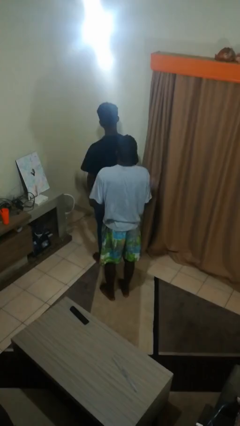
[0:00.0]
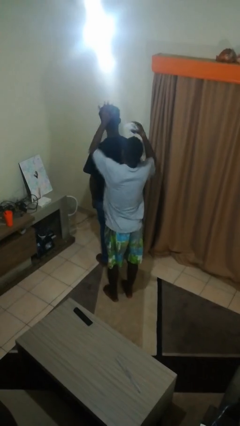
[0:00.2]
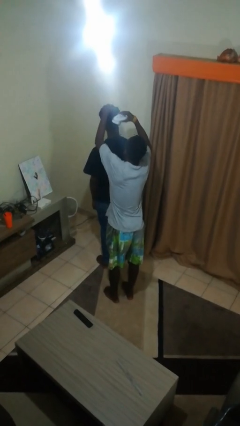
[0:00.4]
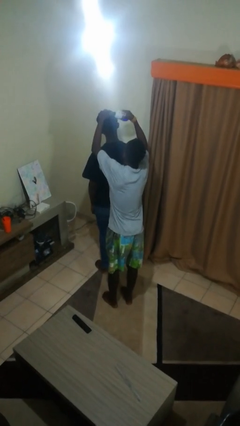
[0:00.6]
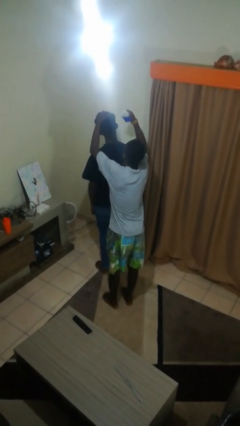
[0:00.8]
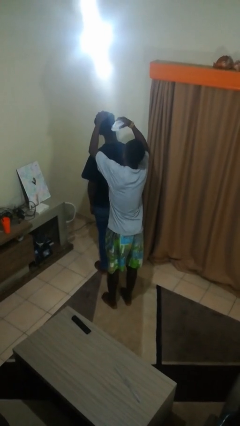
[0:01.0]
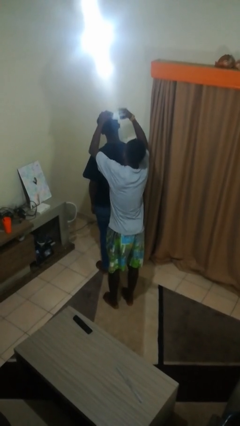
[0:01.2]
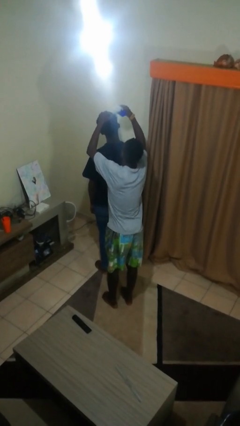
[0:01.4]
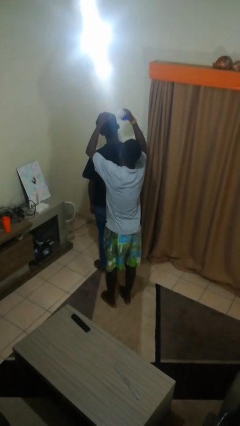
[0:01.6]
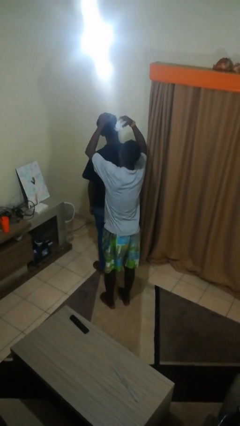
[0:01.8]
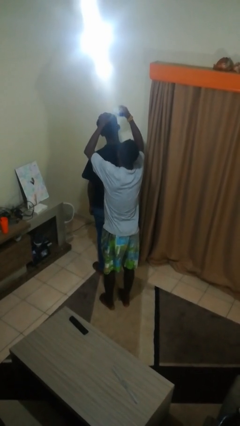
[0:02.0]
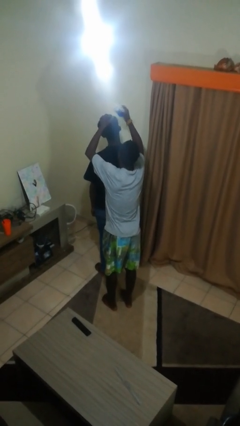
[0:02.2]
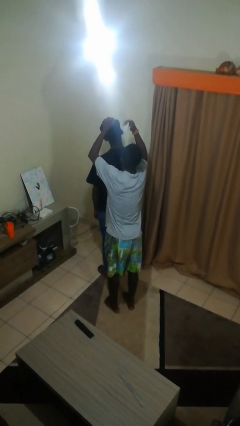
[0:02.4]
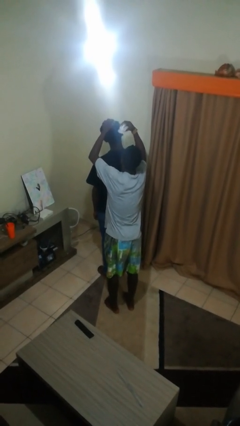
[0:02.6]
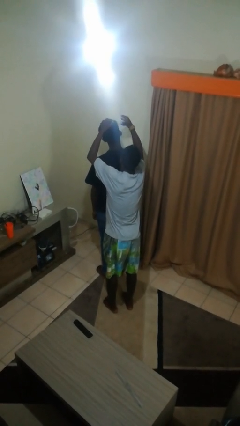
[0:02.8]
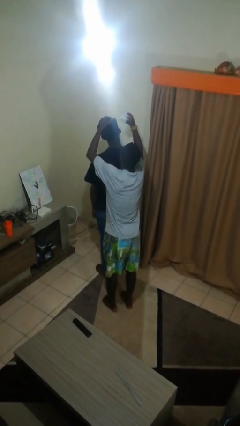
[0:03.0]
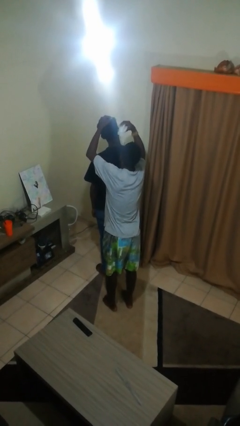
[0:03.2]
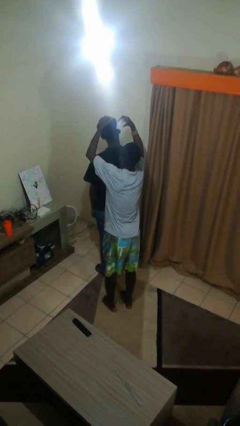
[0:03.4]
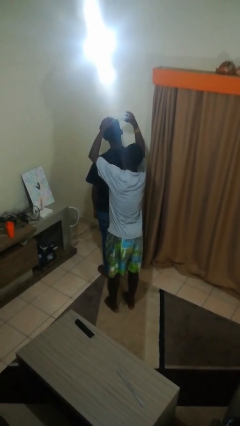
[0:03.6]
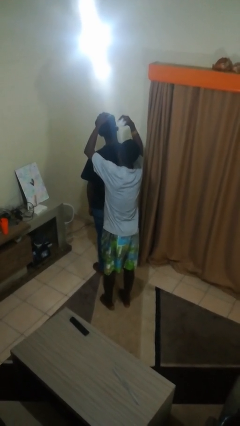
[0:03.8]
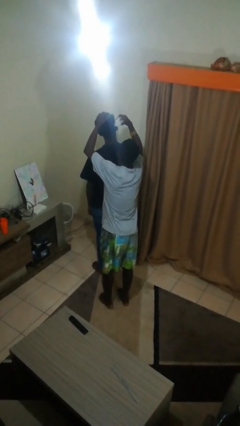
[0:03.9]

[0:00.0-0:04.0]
person brushes hair of person

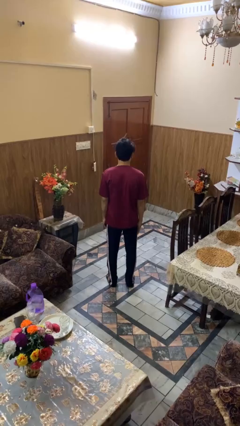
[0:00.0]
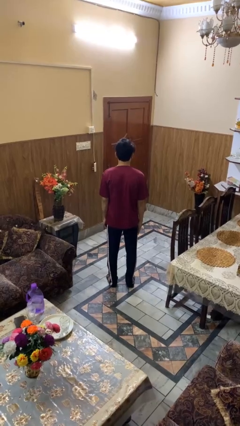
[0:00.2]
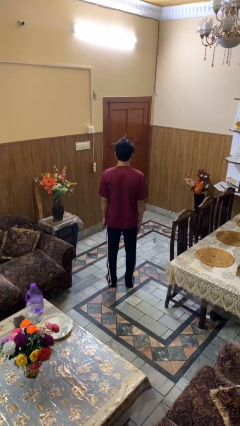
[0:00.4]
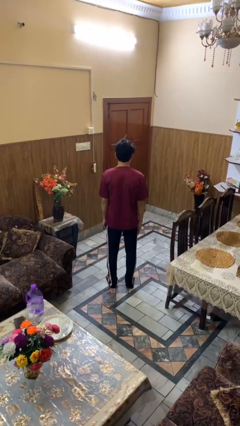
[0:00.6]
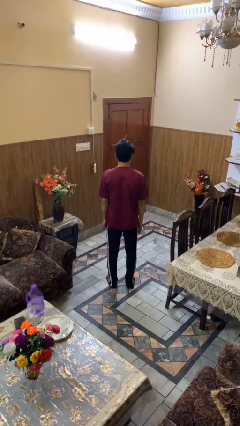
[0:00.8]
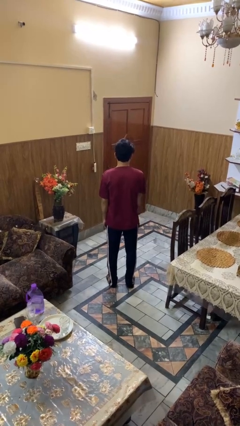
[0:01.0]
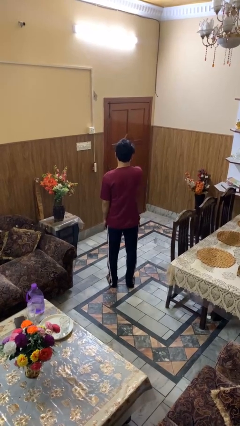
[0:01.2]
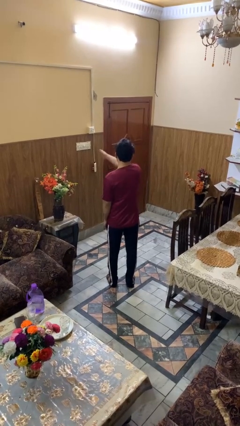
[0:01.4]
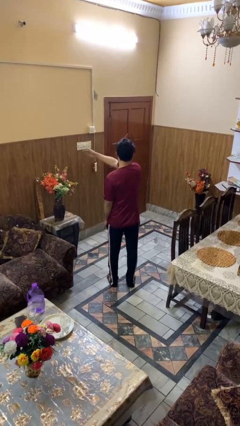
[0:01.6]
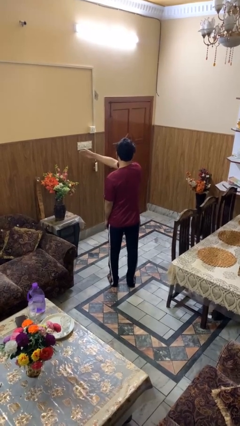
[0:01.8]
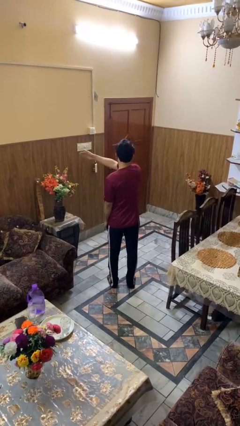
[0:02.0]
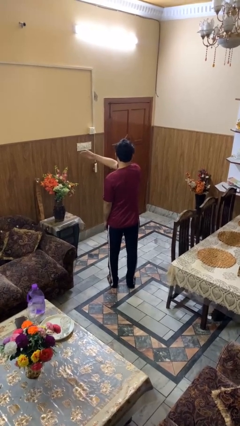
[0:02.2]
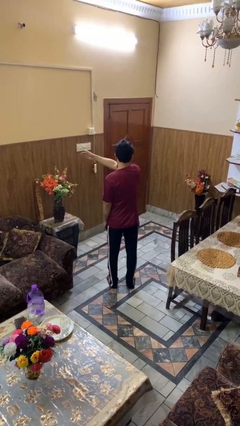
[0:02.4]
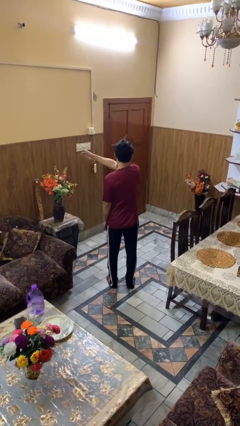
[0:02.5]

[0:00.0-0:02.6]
person gestures swipe left

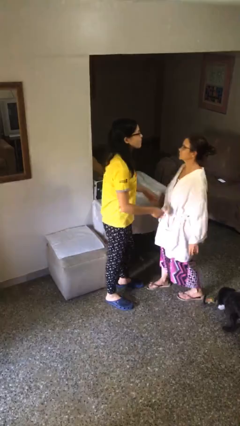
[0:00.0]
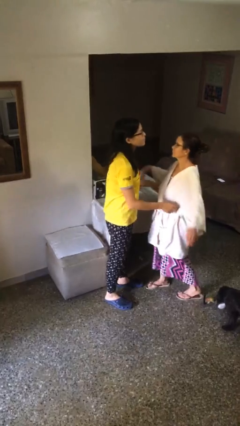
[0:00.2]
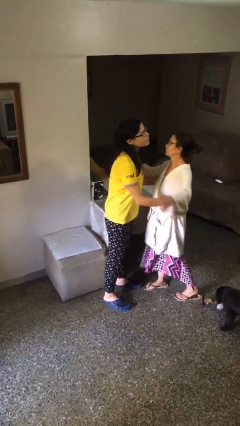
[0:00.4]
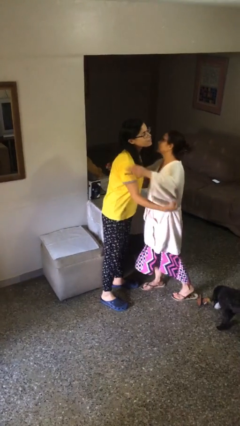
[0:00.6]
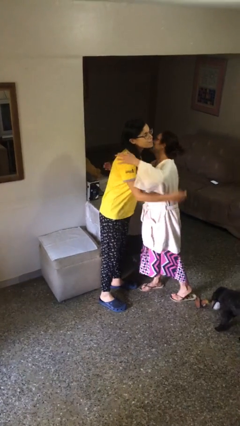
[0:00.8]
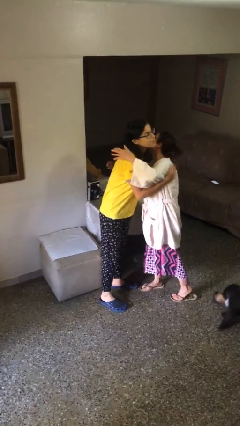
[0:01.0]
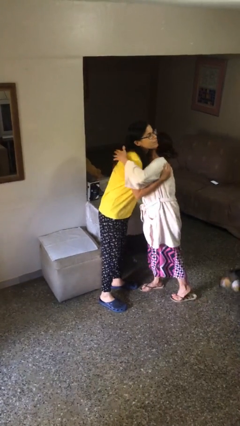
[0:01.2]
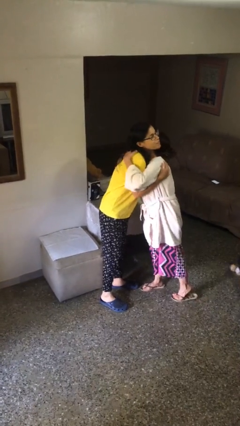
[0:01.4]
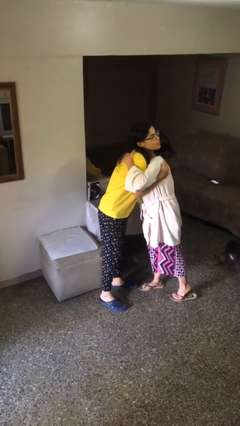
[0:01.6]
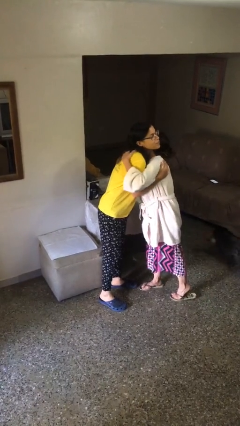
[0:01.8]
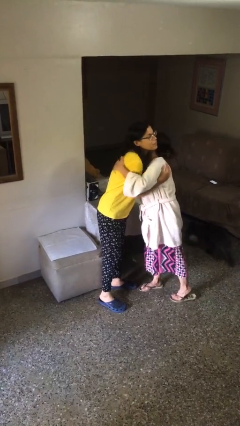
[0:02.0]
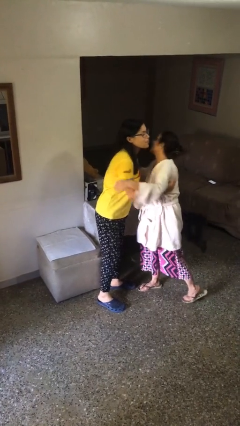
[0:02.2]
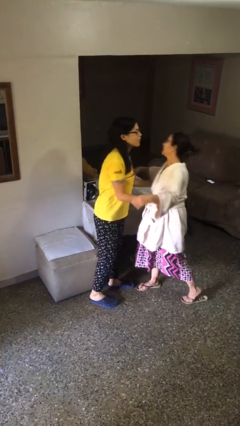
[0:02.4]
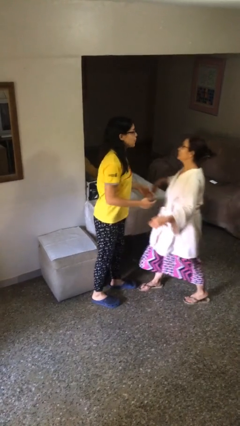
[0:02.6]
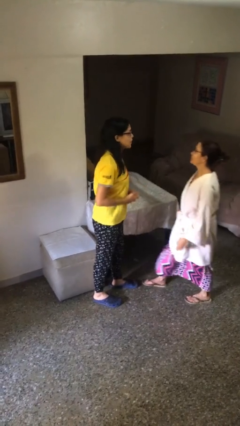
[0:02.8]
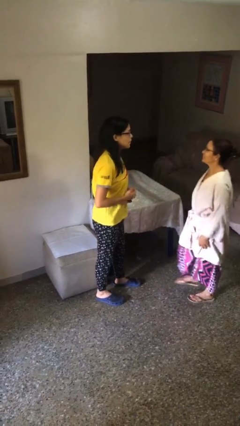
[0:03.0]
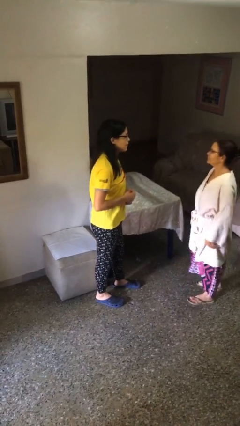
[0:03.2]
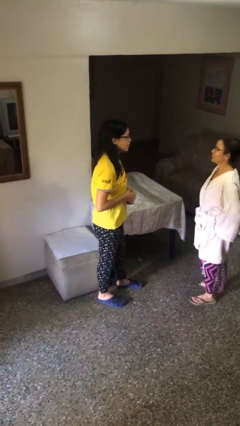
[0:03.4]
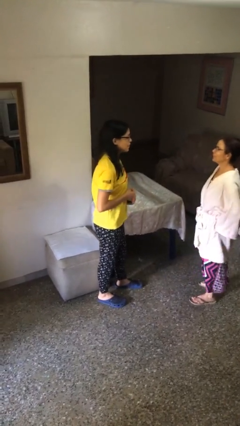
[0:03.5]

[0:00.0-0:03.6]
person embraces person

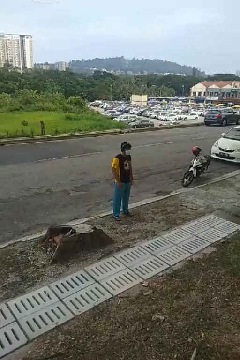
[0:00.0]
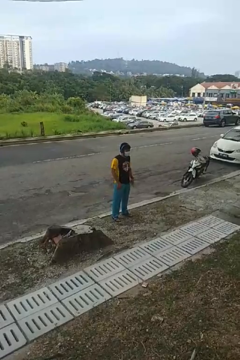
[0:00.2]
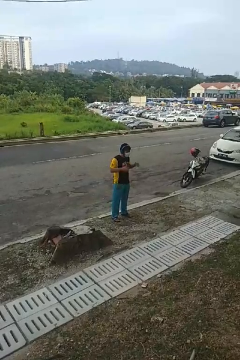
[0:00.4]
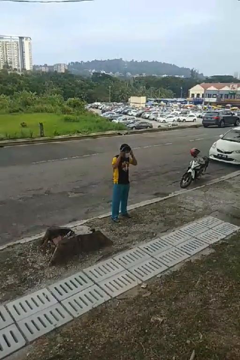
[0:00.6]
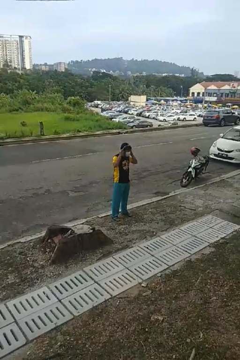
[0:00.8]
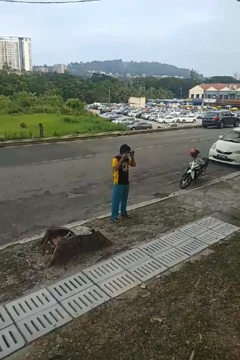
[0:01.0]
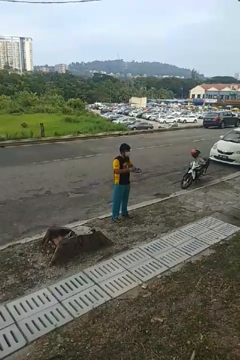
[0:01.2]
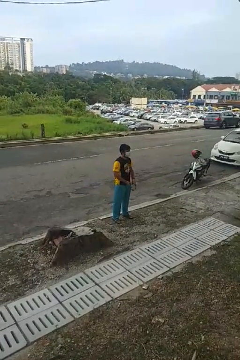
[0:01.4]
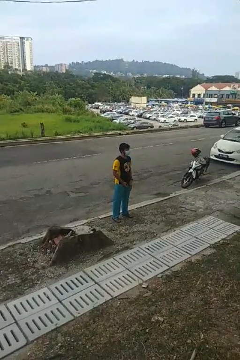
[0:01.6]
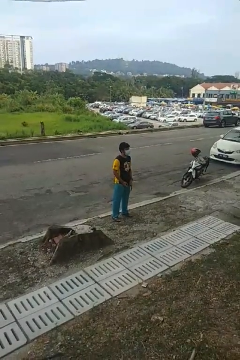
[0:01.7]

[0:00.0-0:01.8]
person takes off headphones

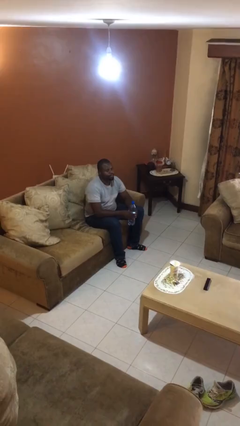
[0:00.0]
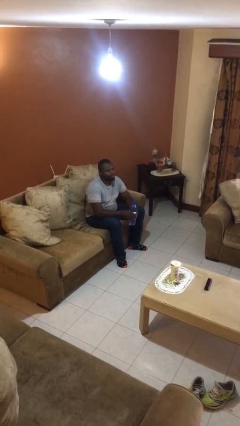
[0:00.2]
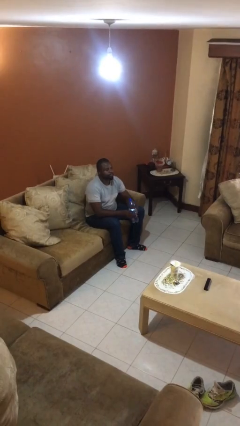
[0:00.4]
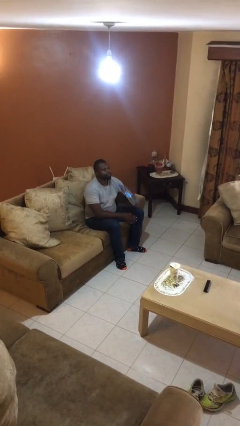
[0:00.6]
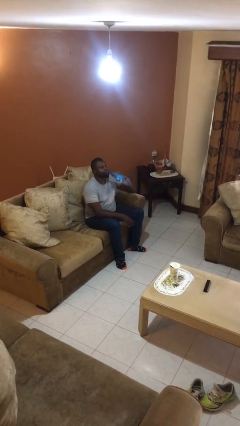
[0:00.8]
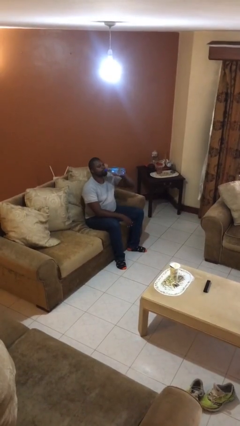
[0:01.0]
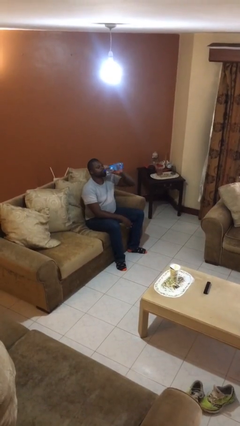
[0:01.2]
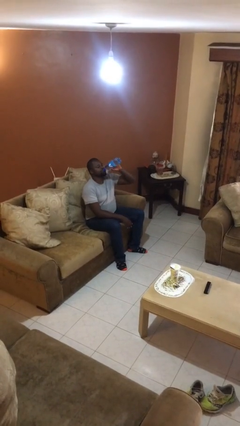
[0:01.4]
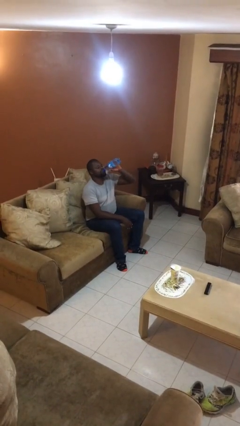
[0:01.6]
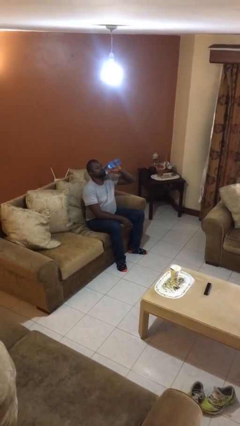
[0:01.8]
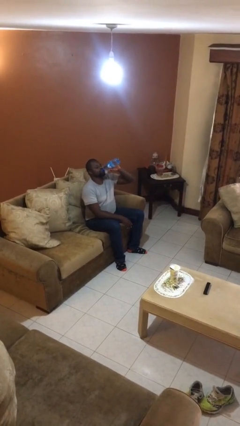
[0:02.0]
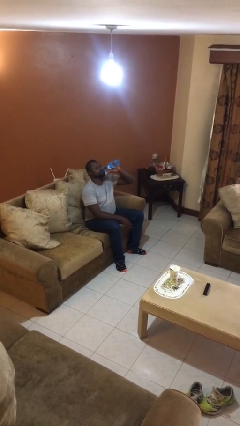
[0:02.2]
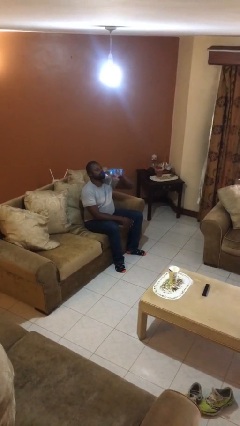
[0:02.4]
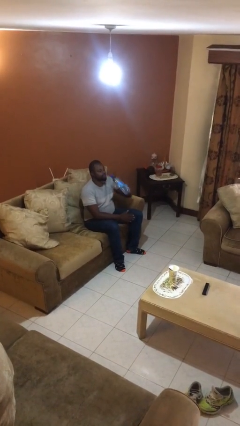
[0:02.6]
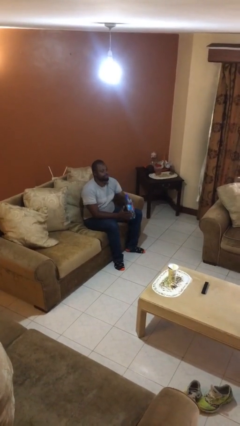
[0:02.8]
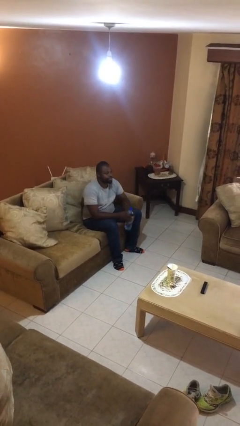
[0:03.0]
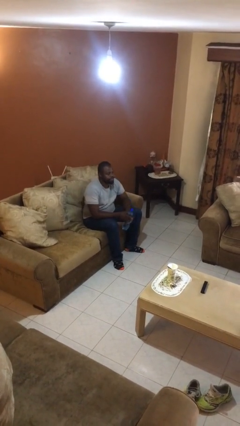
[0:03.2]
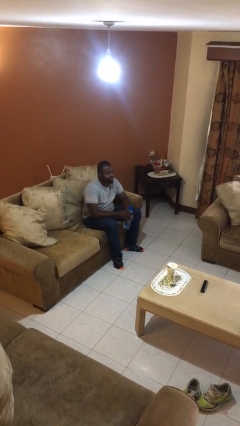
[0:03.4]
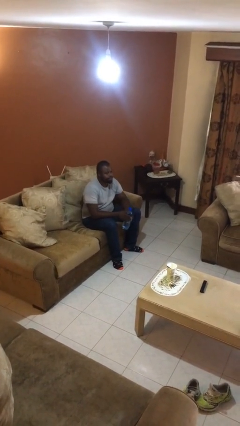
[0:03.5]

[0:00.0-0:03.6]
person drinks from bottle

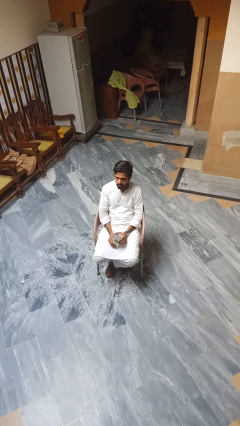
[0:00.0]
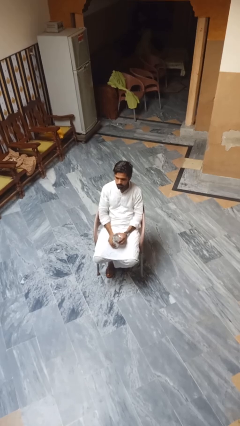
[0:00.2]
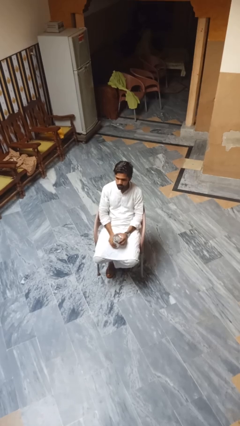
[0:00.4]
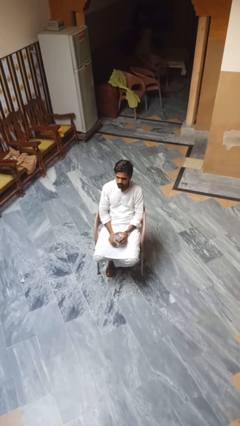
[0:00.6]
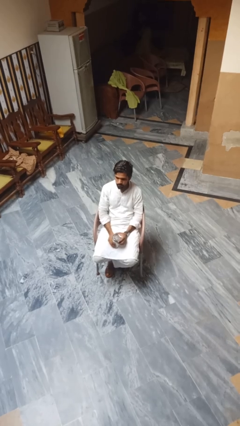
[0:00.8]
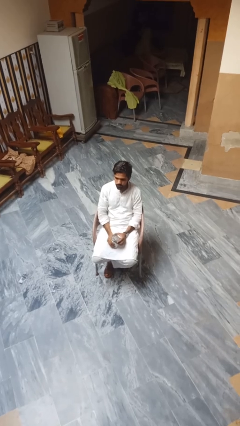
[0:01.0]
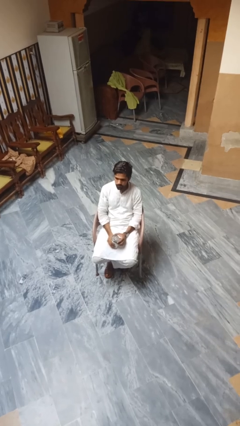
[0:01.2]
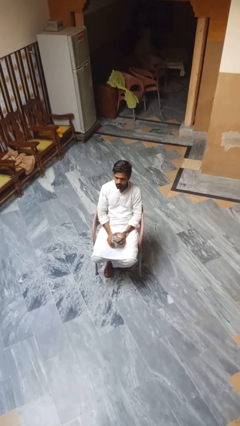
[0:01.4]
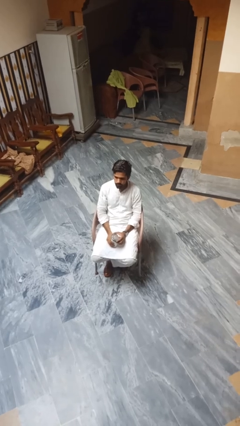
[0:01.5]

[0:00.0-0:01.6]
person drinks from beverage can
